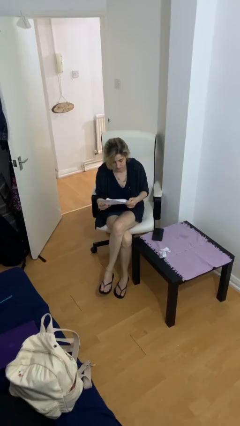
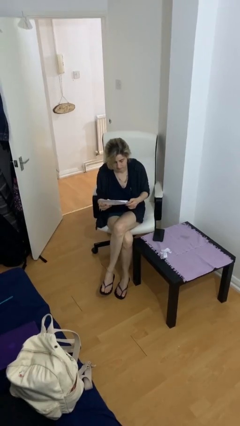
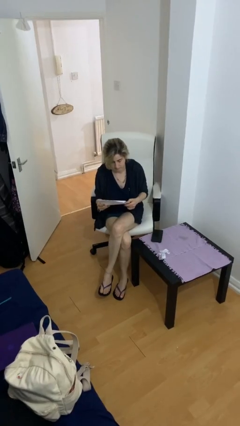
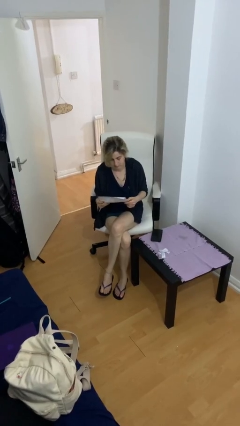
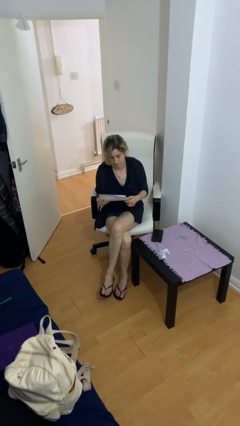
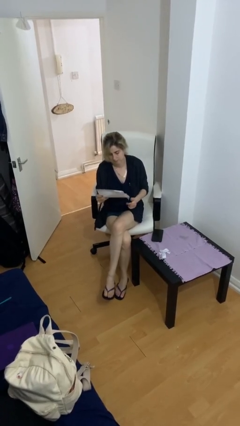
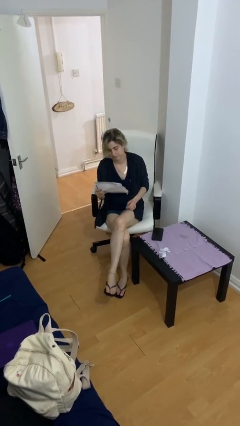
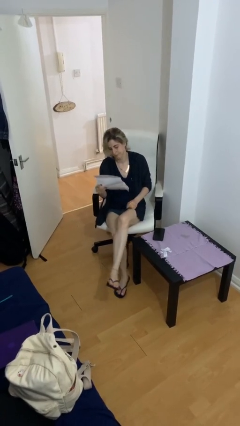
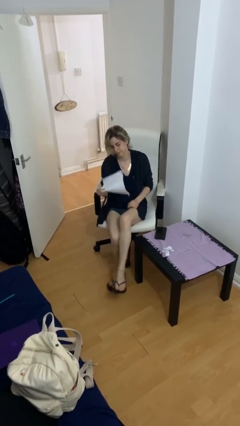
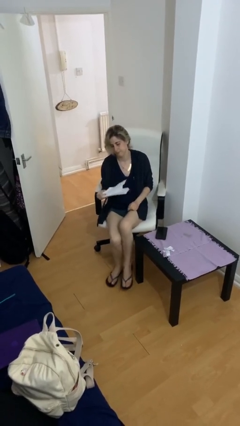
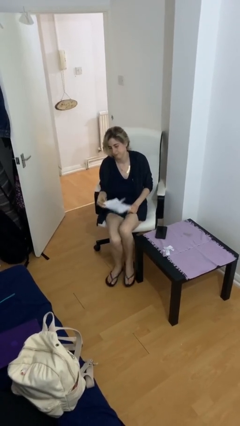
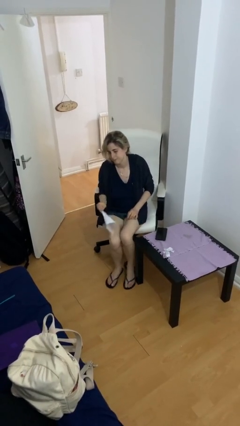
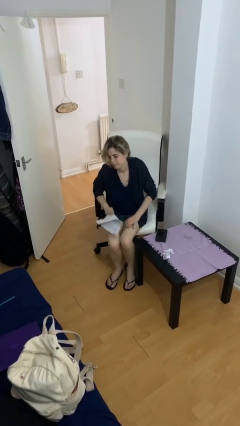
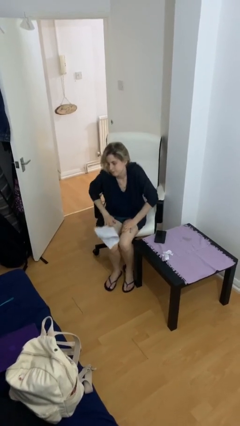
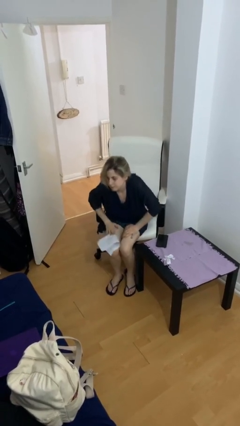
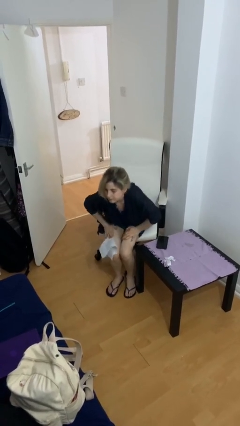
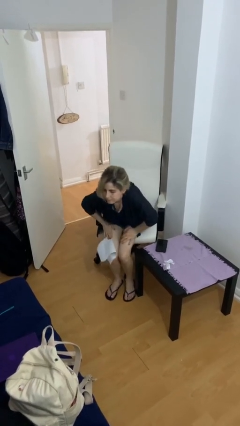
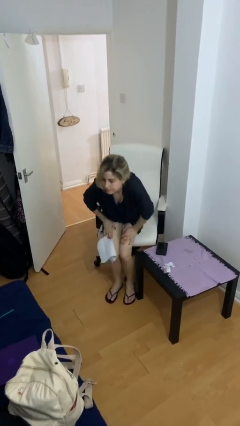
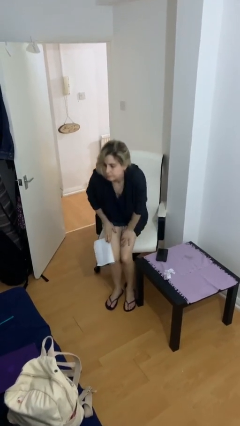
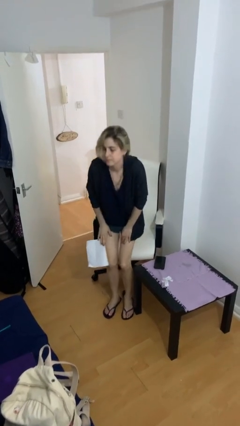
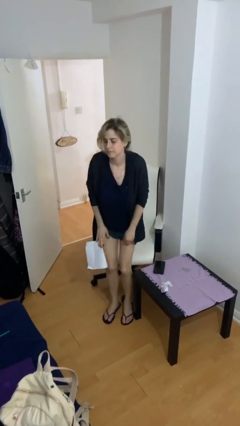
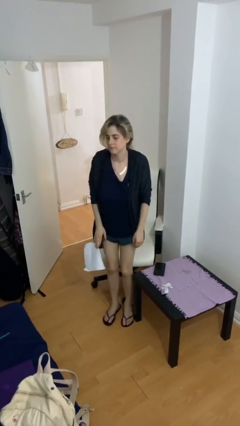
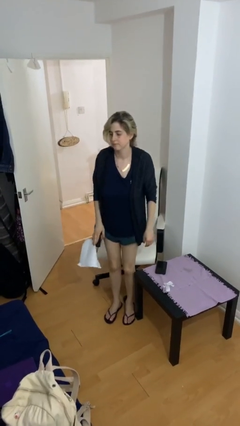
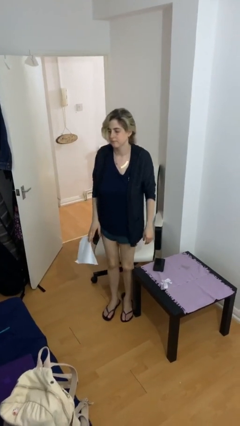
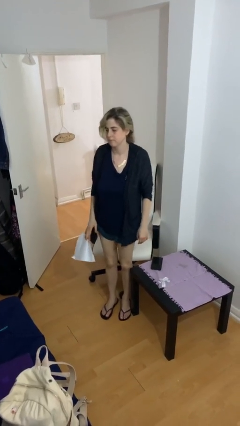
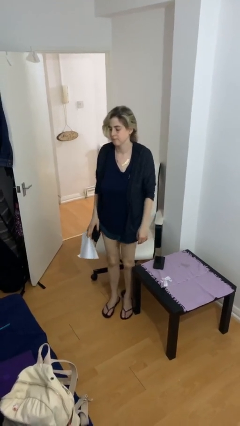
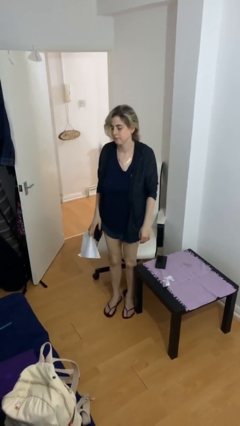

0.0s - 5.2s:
person stands up

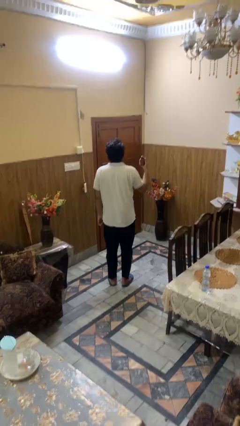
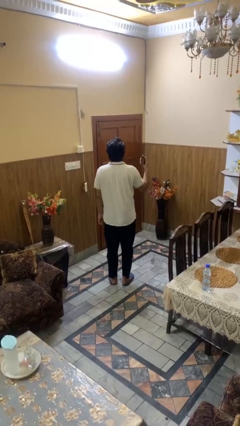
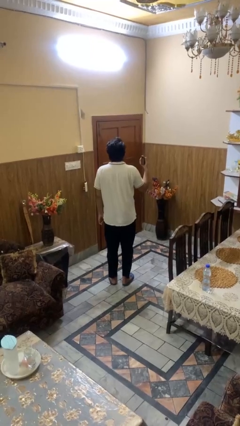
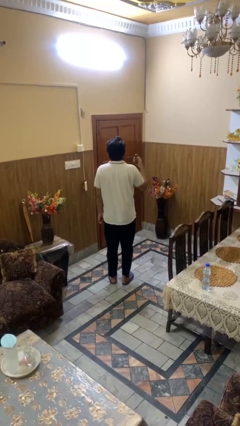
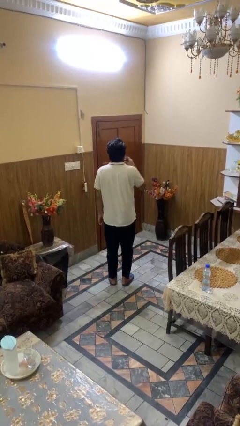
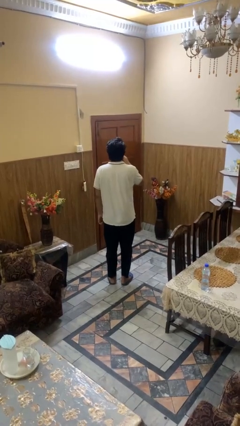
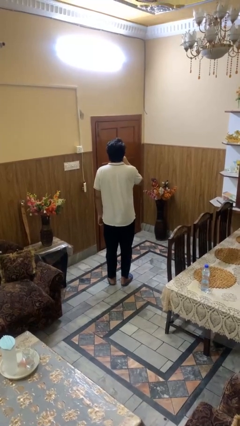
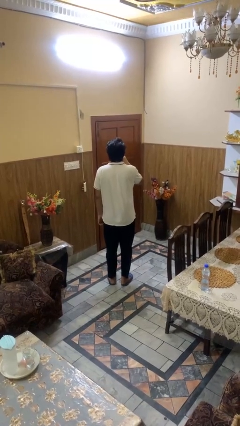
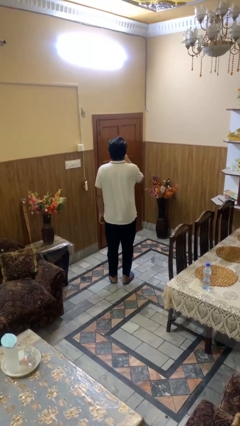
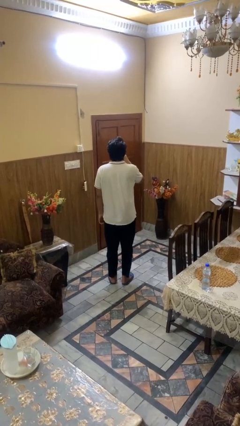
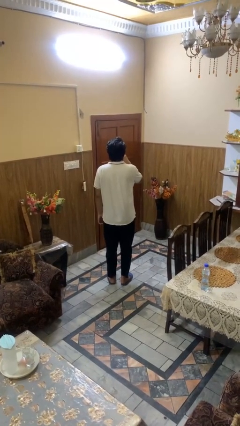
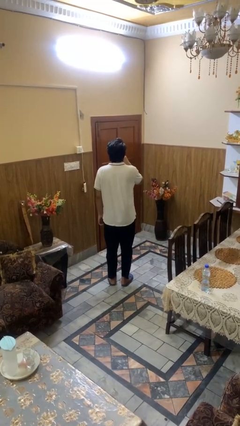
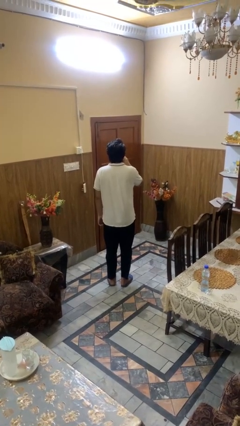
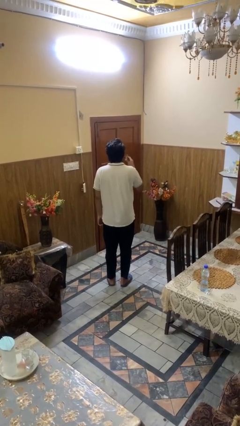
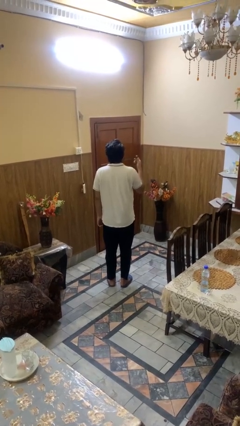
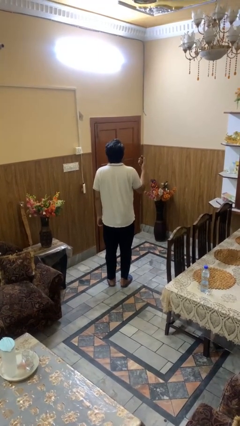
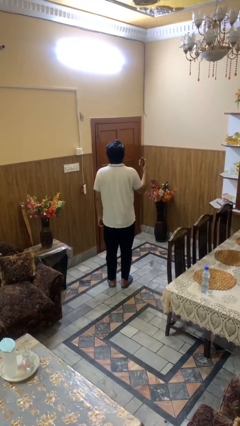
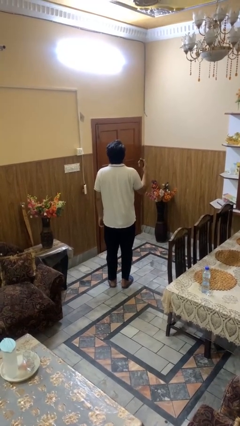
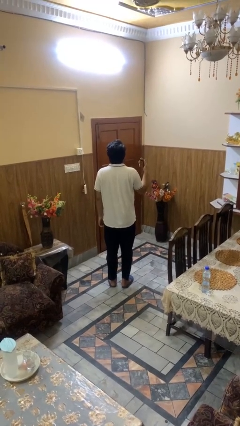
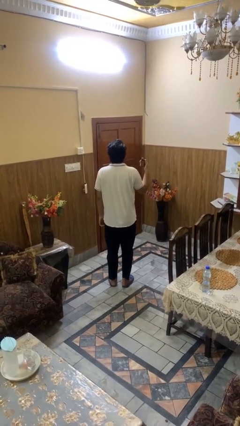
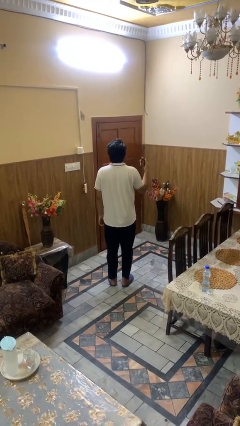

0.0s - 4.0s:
person vapes

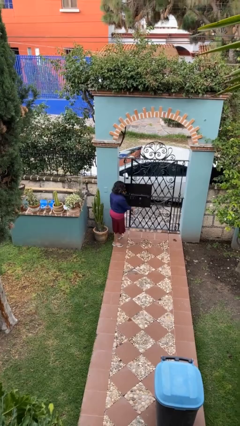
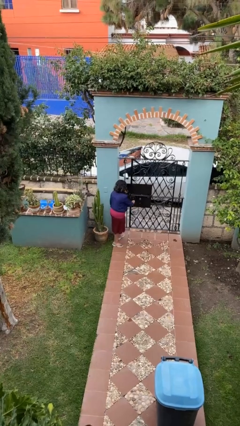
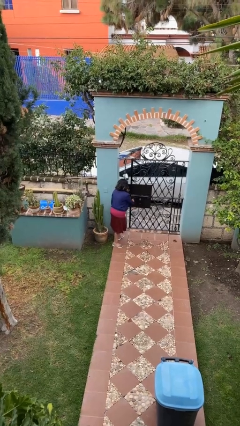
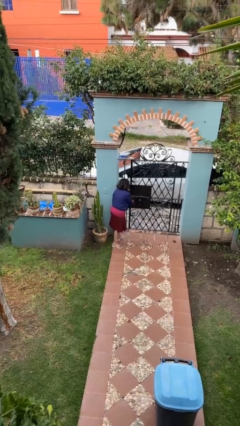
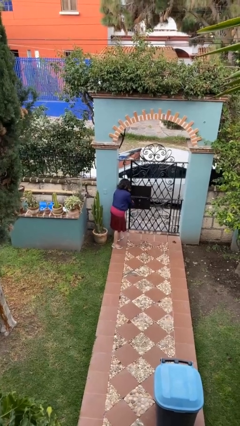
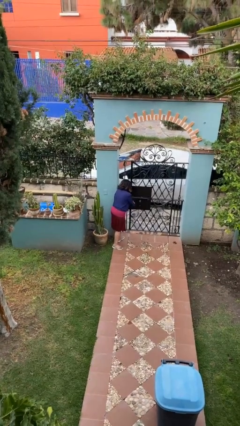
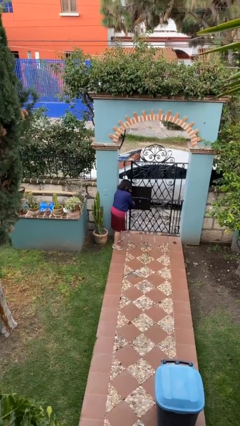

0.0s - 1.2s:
person unlocks door with keys

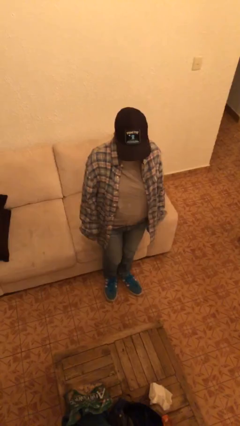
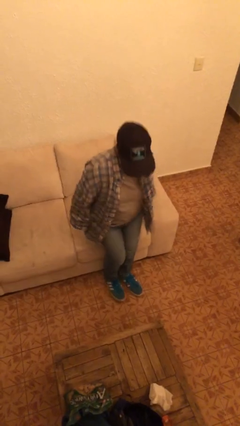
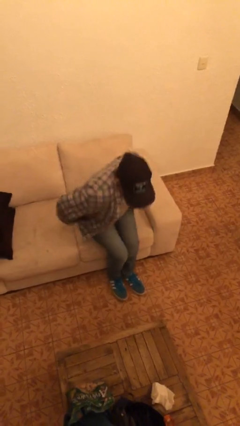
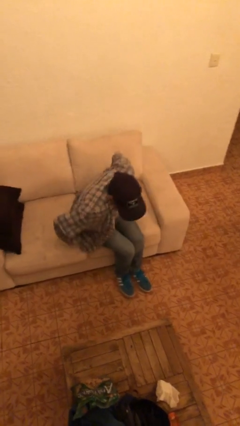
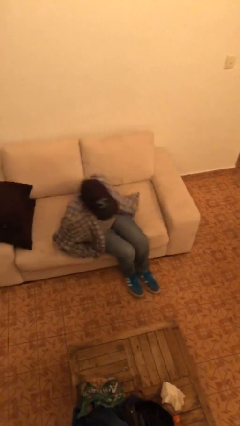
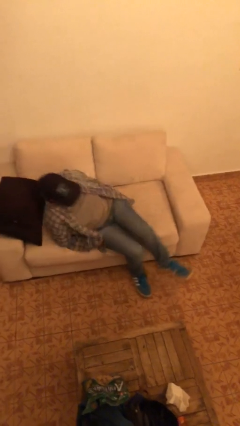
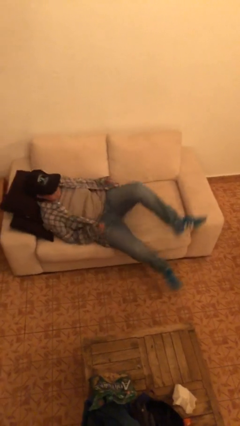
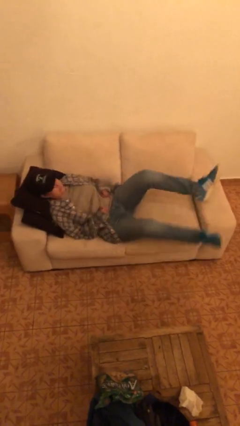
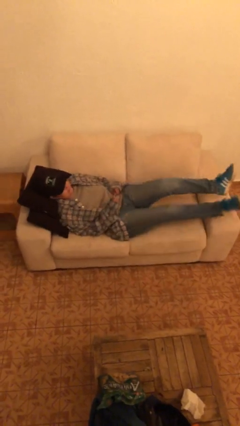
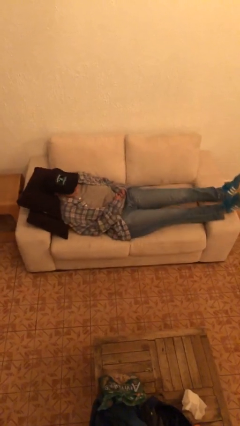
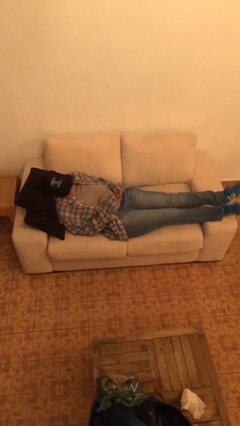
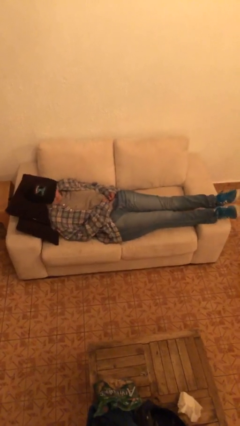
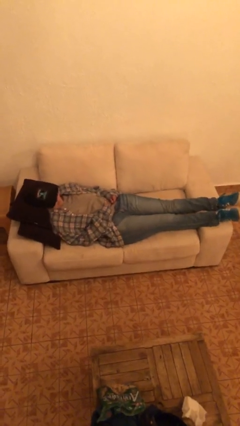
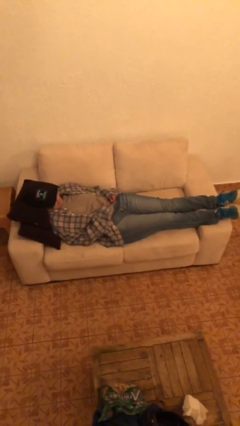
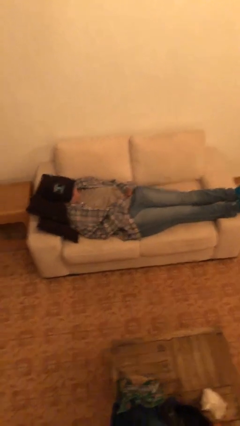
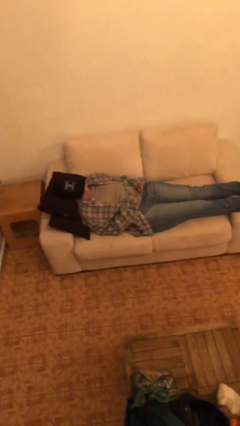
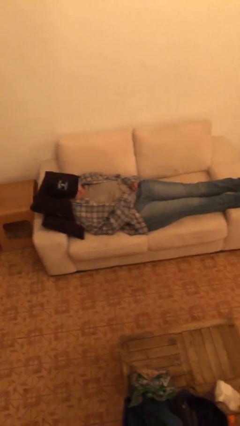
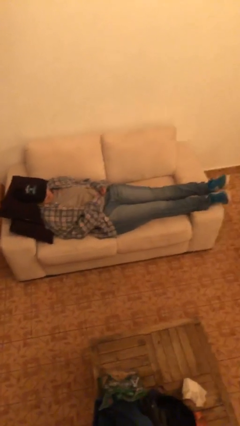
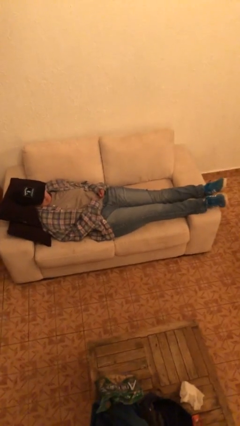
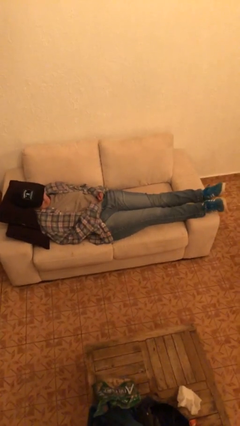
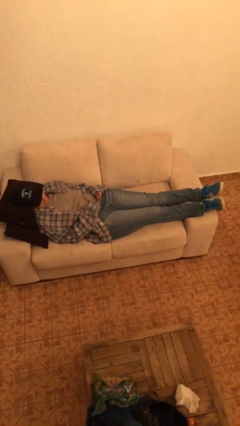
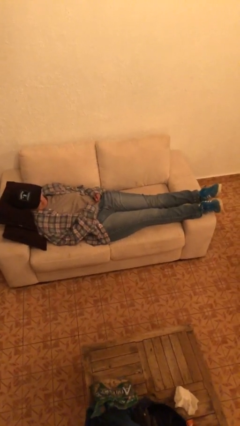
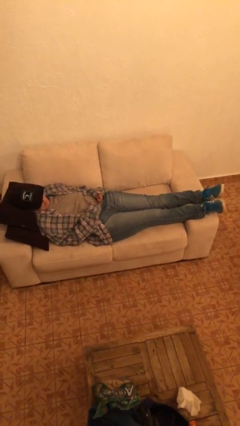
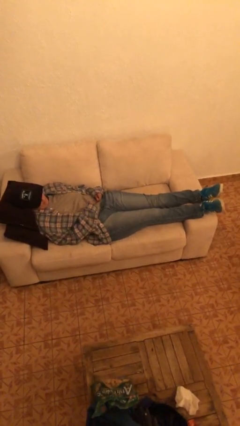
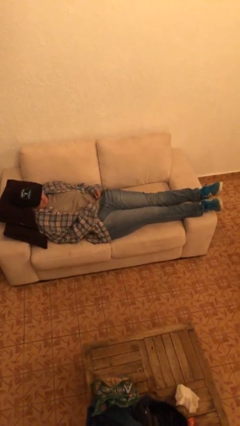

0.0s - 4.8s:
person lies down on couch

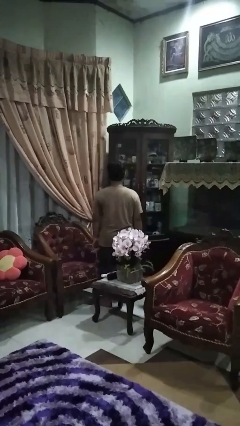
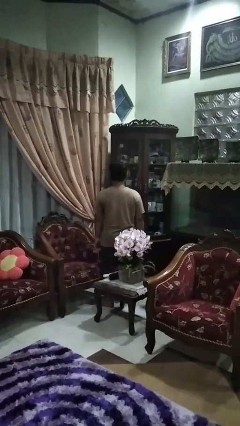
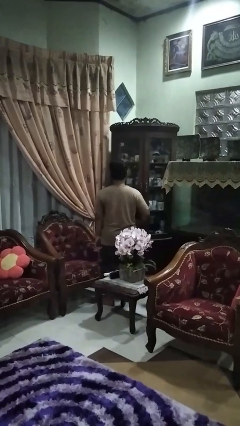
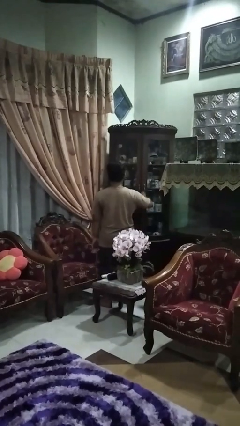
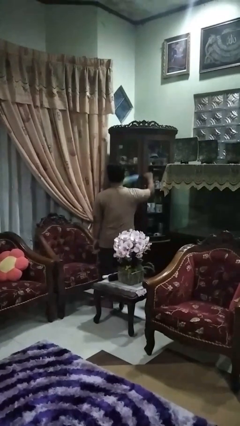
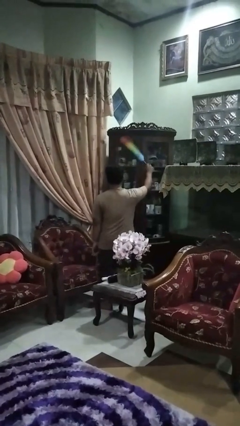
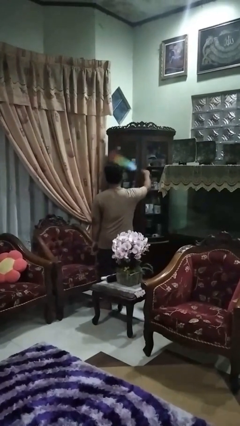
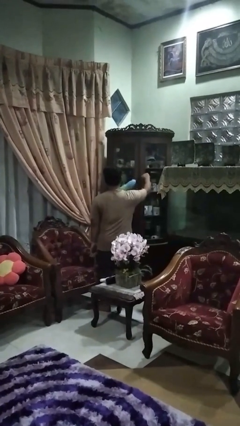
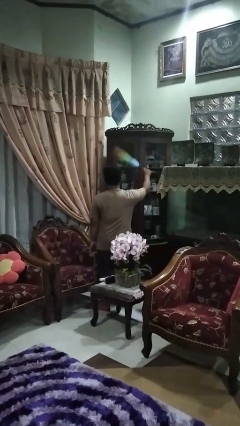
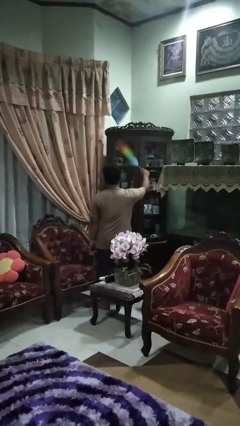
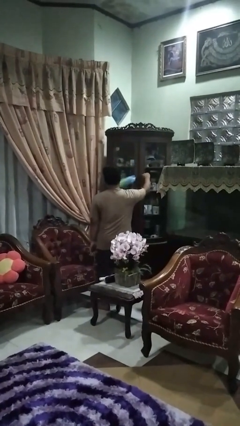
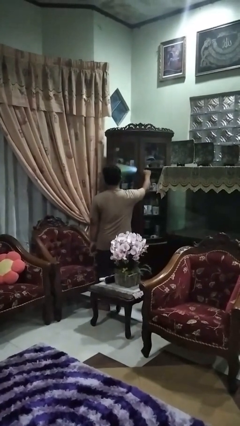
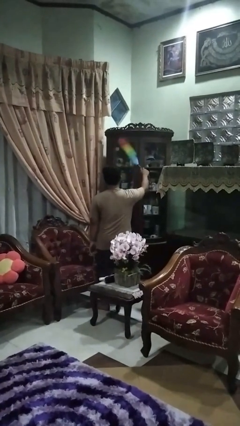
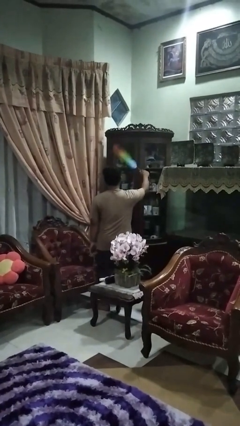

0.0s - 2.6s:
person dusts furniture
